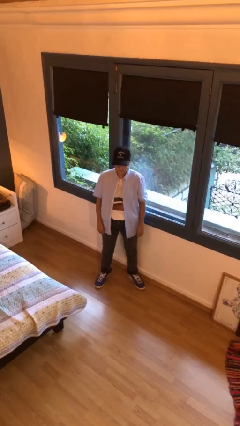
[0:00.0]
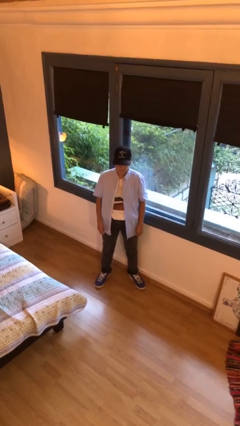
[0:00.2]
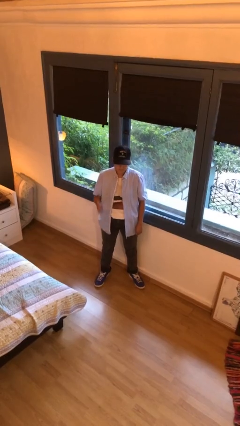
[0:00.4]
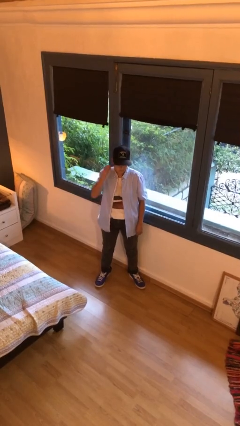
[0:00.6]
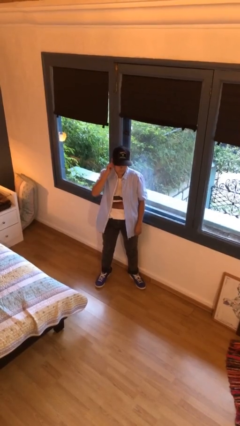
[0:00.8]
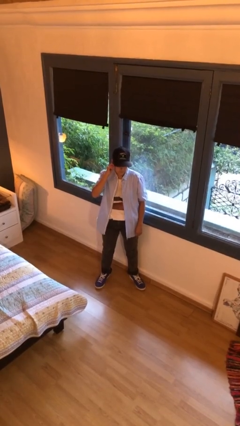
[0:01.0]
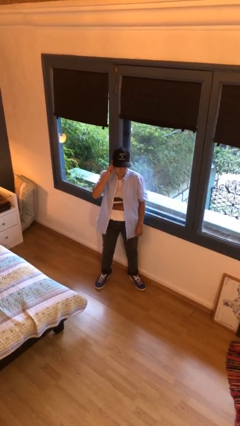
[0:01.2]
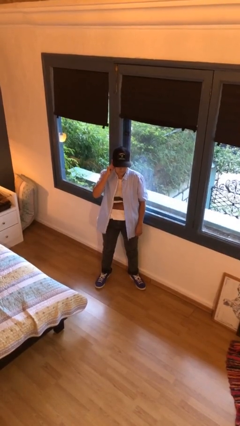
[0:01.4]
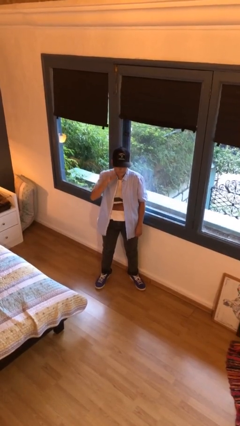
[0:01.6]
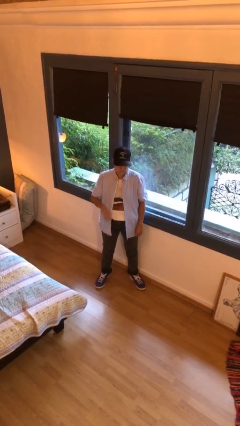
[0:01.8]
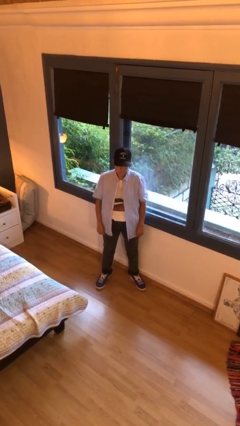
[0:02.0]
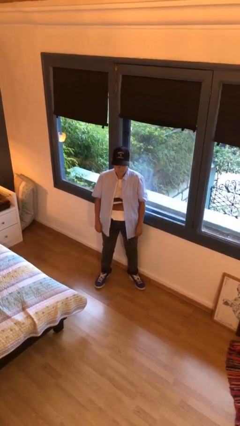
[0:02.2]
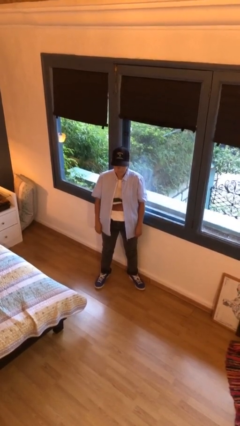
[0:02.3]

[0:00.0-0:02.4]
person touches earlobe

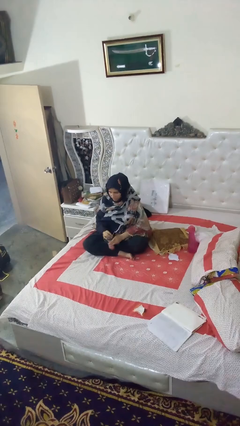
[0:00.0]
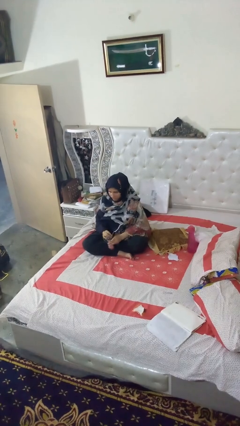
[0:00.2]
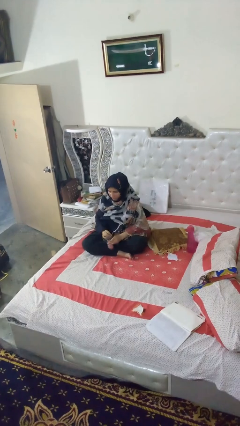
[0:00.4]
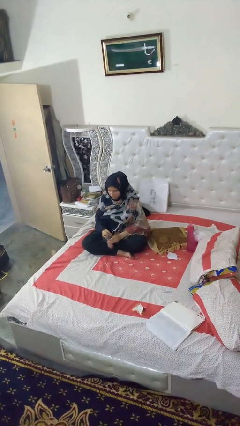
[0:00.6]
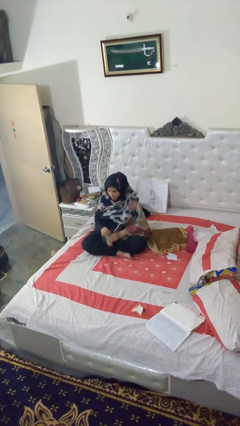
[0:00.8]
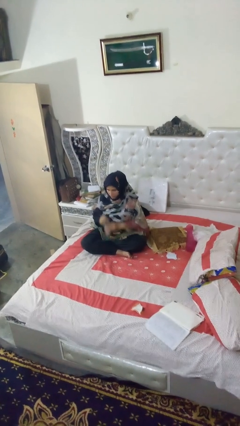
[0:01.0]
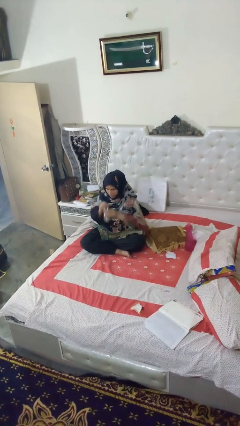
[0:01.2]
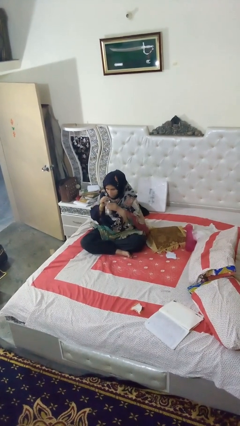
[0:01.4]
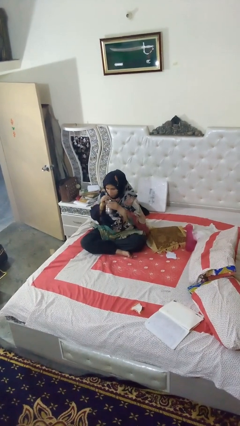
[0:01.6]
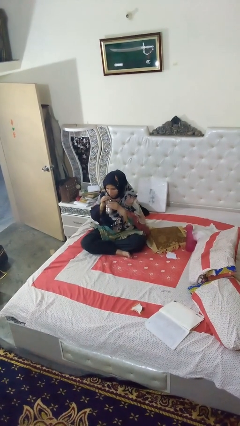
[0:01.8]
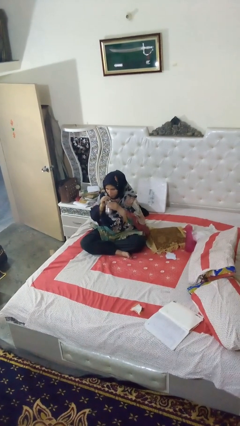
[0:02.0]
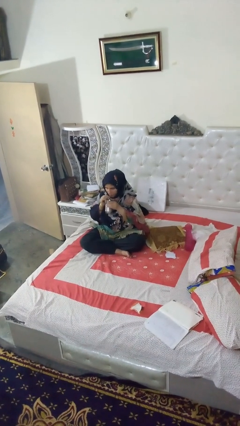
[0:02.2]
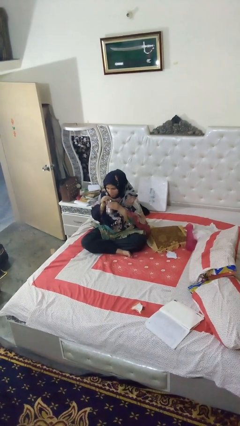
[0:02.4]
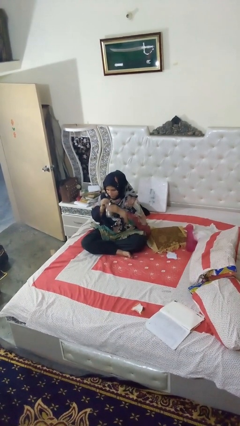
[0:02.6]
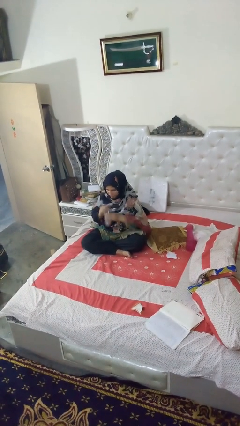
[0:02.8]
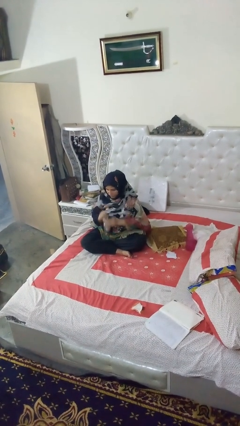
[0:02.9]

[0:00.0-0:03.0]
person drinks from straw

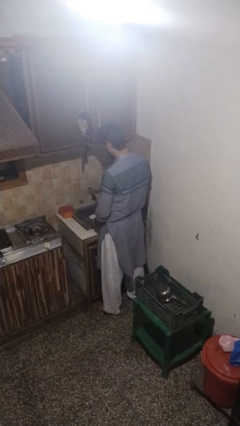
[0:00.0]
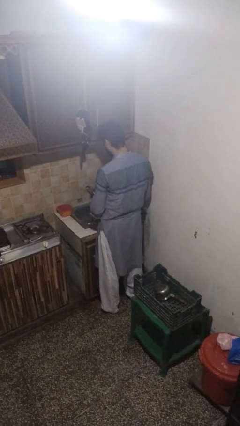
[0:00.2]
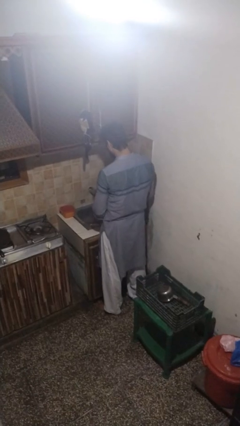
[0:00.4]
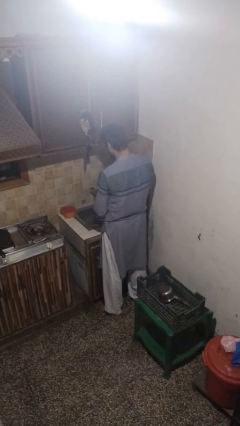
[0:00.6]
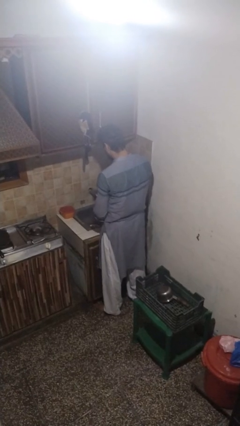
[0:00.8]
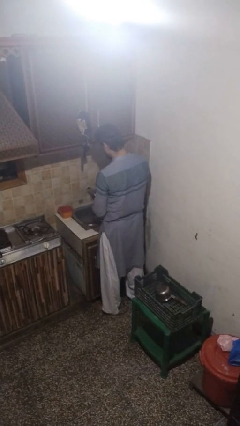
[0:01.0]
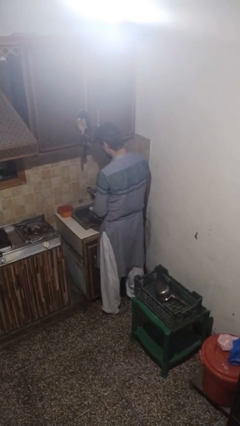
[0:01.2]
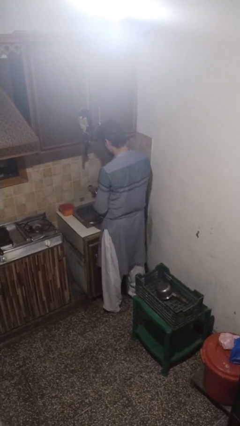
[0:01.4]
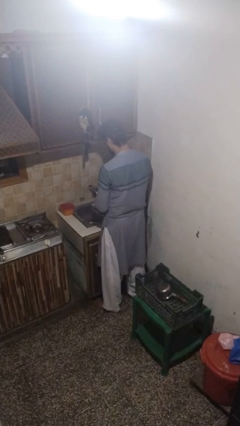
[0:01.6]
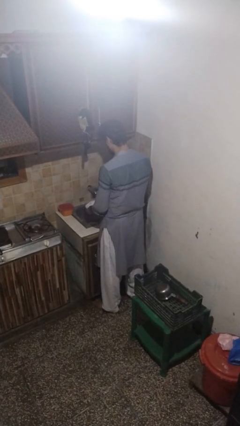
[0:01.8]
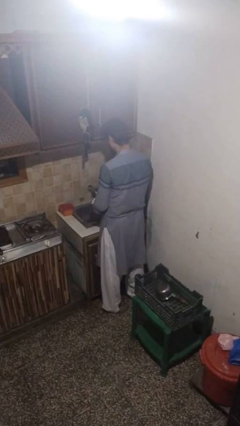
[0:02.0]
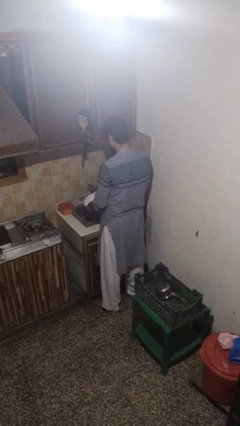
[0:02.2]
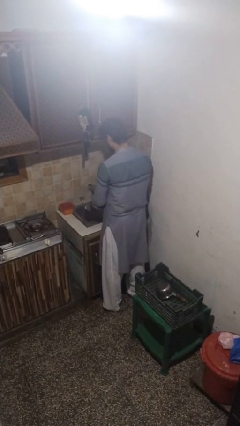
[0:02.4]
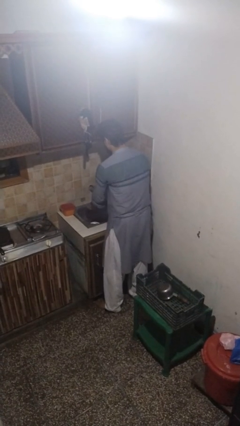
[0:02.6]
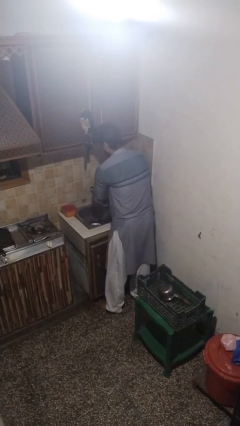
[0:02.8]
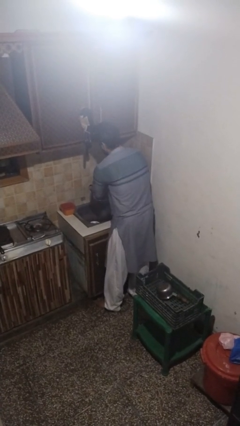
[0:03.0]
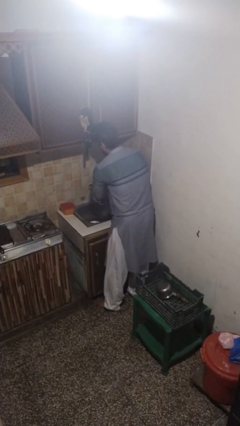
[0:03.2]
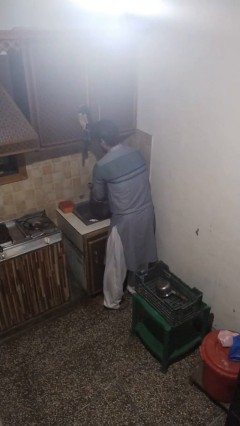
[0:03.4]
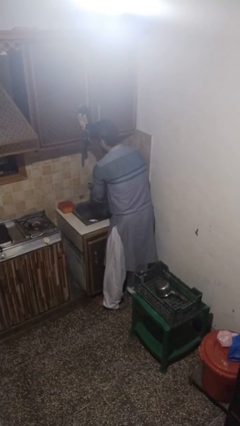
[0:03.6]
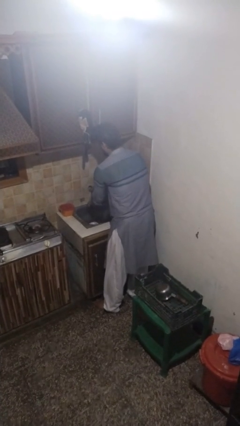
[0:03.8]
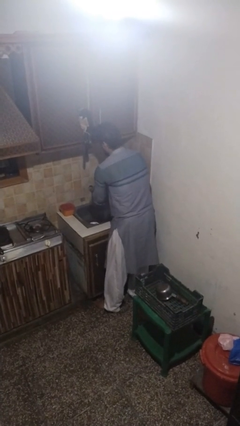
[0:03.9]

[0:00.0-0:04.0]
person washes dish

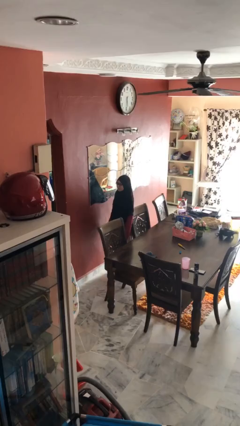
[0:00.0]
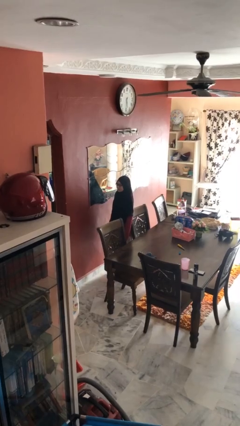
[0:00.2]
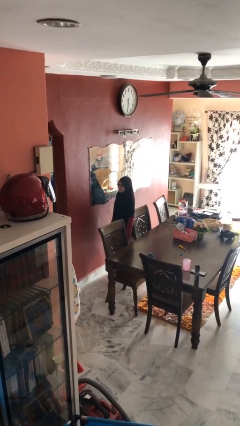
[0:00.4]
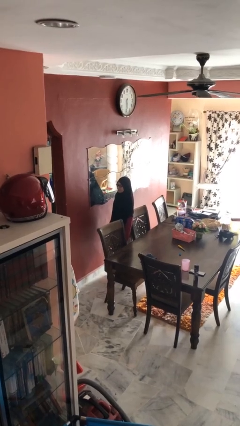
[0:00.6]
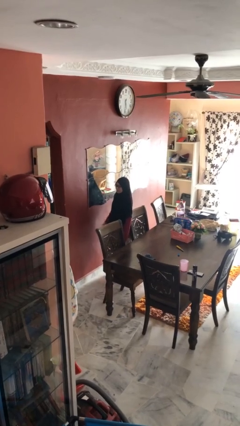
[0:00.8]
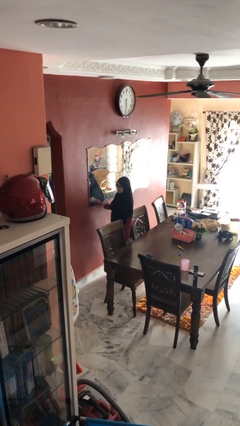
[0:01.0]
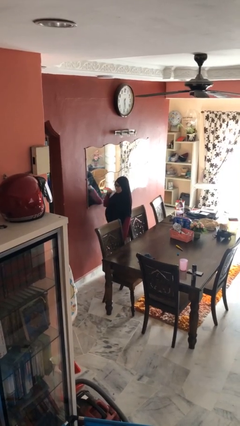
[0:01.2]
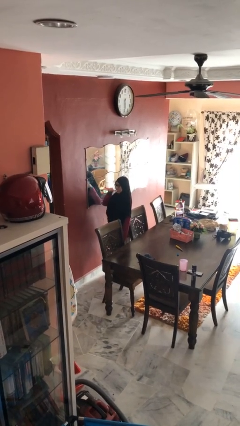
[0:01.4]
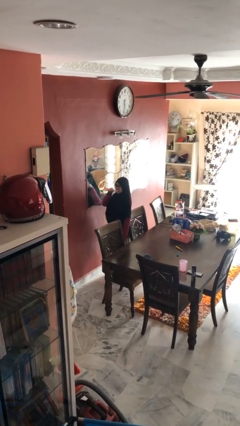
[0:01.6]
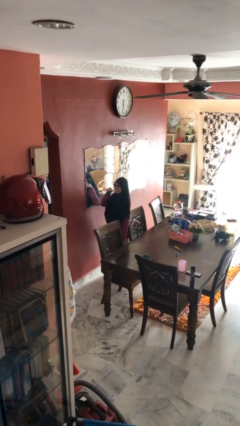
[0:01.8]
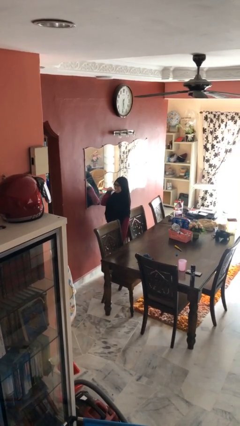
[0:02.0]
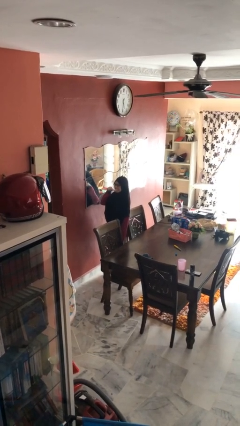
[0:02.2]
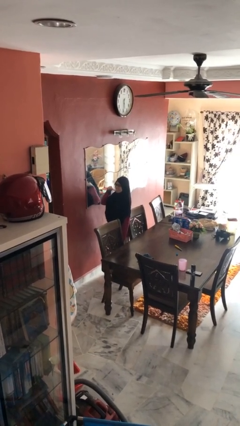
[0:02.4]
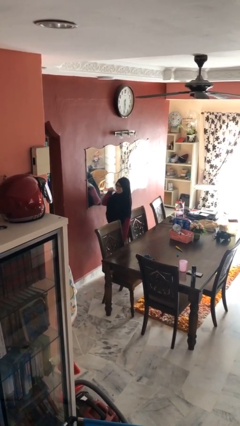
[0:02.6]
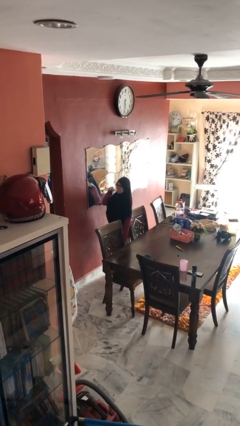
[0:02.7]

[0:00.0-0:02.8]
person brushes teeth

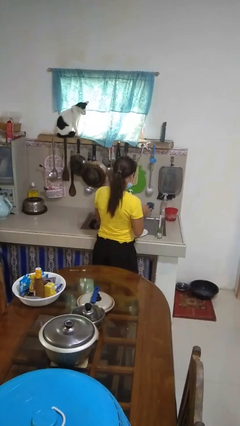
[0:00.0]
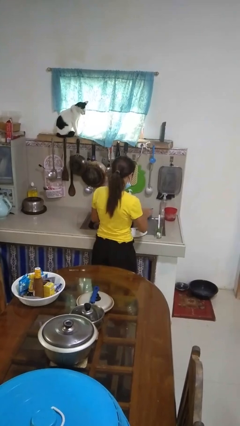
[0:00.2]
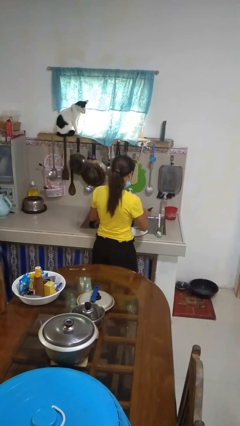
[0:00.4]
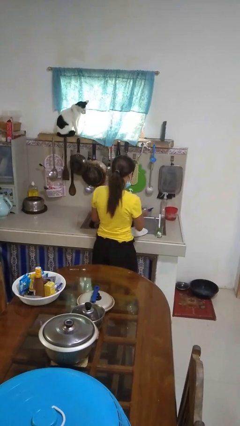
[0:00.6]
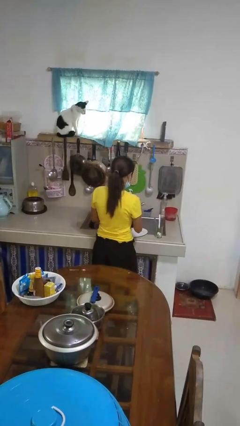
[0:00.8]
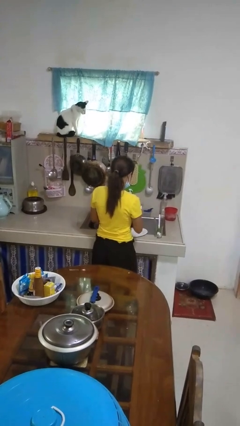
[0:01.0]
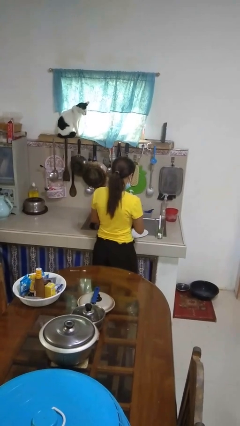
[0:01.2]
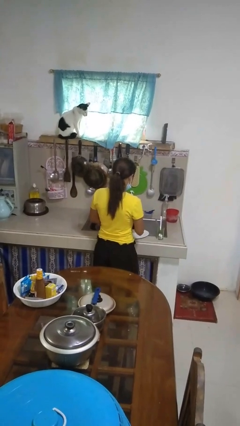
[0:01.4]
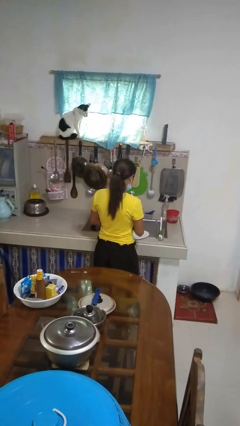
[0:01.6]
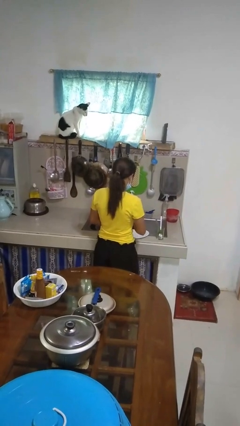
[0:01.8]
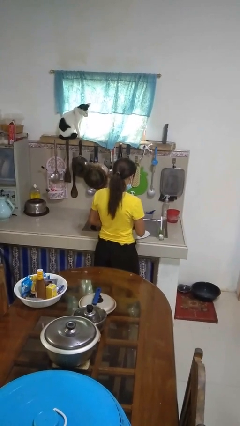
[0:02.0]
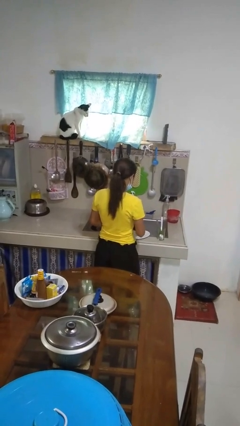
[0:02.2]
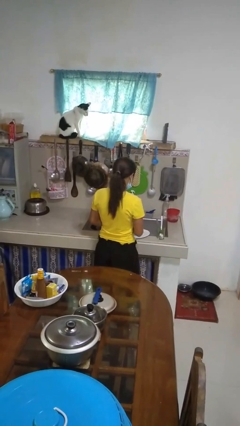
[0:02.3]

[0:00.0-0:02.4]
person dries dish

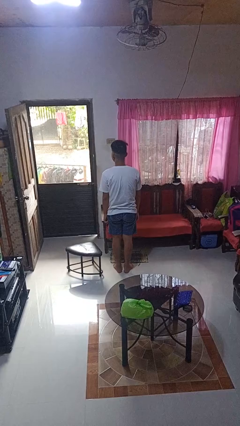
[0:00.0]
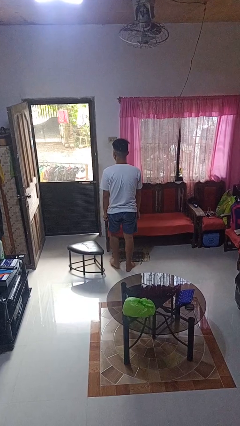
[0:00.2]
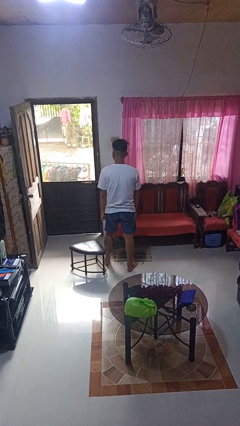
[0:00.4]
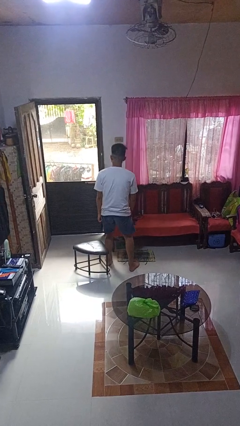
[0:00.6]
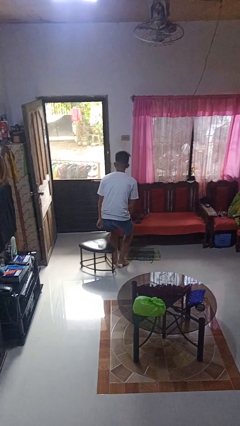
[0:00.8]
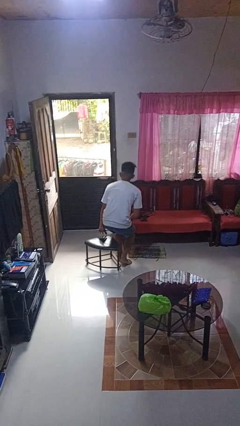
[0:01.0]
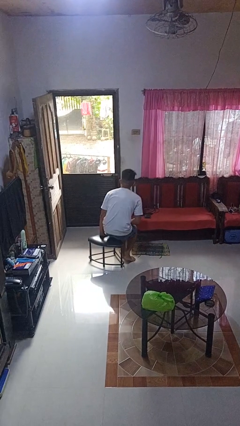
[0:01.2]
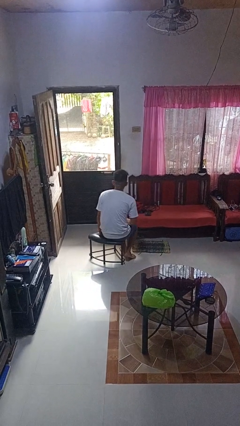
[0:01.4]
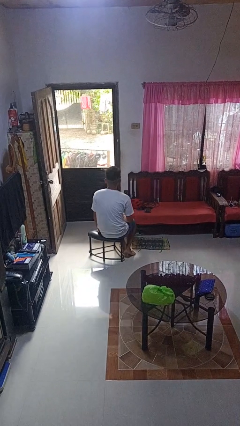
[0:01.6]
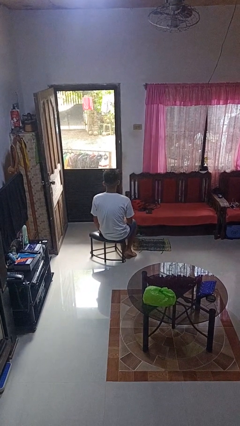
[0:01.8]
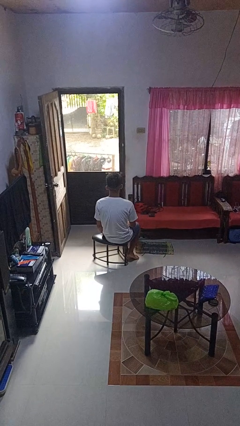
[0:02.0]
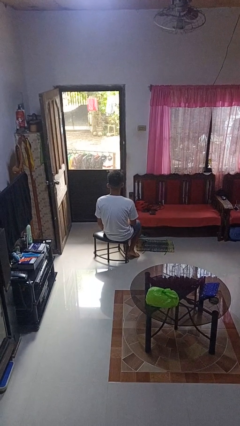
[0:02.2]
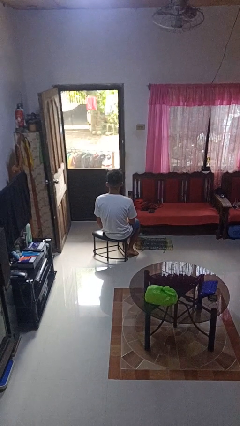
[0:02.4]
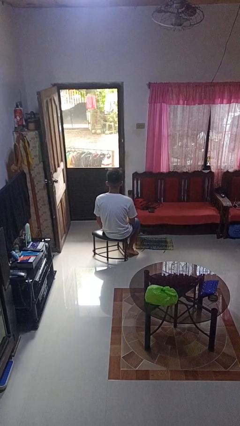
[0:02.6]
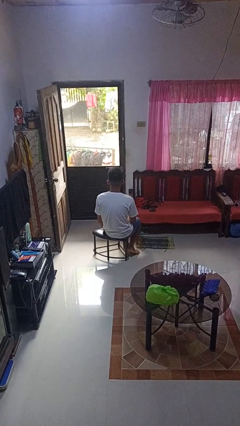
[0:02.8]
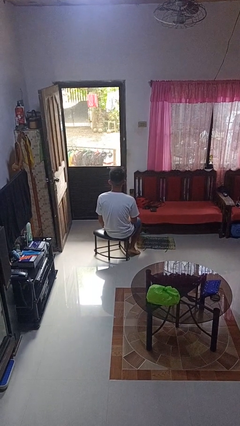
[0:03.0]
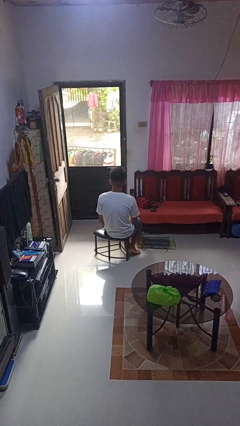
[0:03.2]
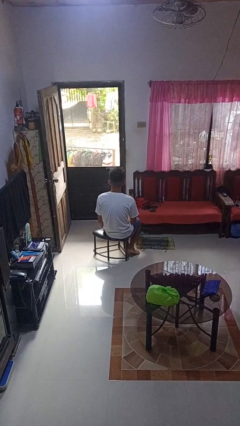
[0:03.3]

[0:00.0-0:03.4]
person sits down
